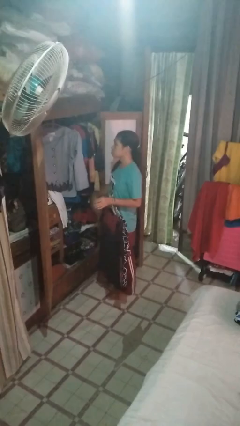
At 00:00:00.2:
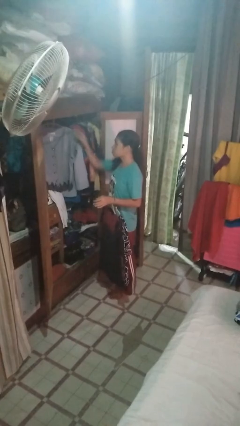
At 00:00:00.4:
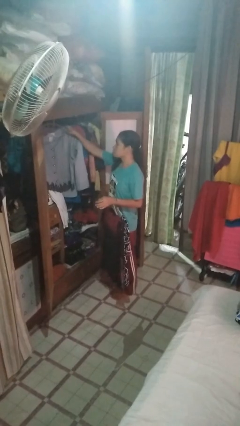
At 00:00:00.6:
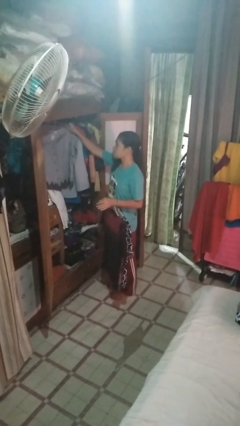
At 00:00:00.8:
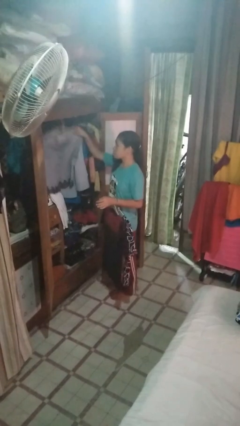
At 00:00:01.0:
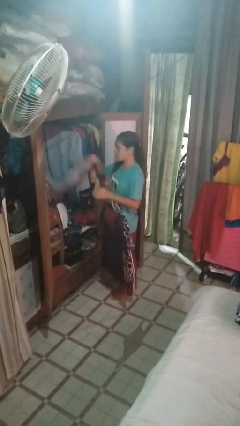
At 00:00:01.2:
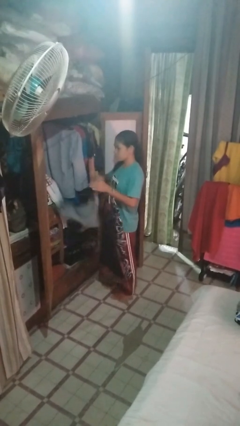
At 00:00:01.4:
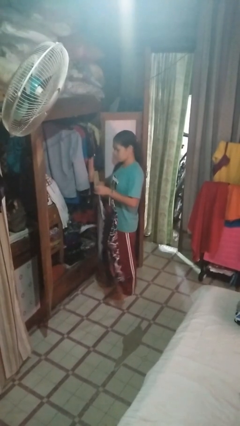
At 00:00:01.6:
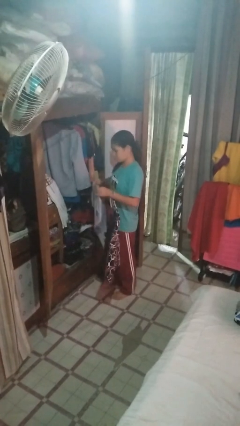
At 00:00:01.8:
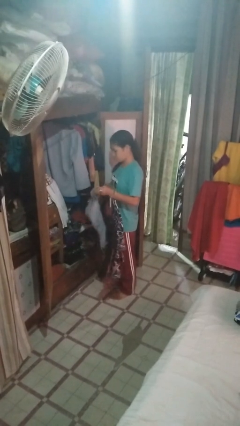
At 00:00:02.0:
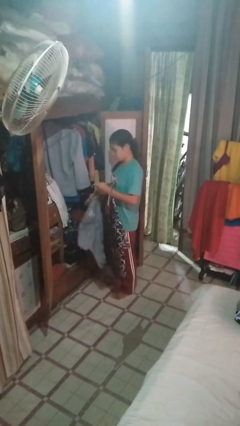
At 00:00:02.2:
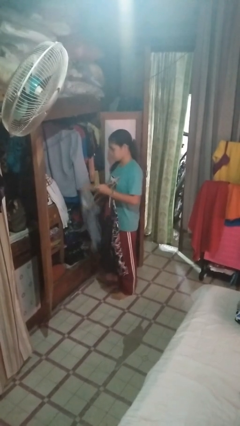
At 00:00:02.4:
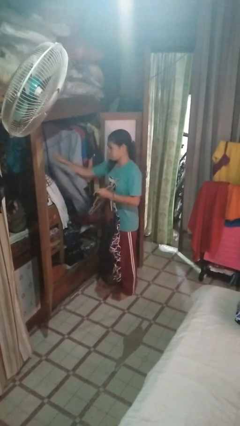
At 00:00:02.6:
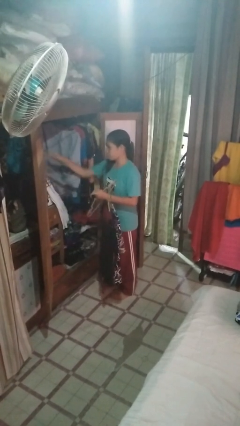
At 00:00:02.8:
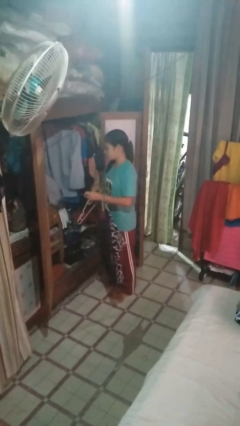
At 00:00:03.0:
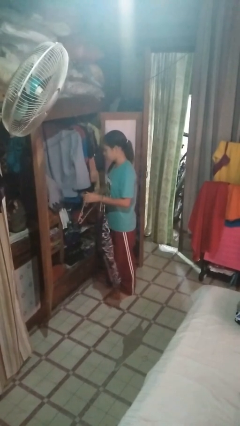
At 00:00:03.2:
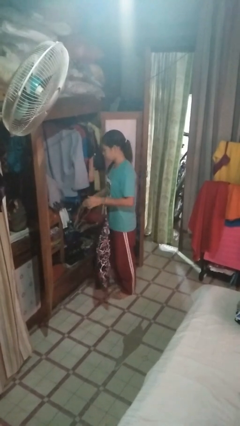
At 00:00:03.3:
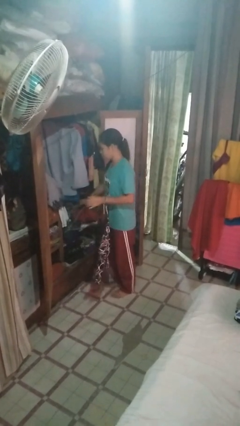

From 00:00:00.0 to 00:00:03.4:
person takes clothes from closet

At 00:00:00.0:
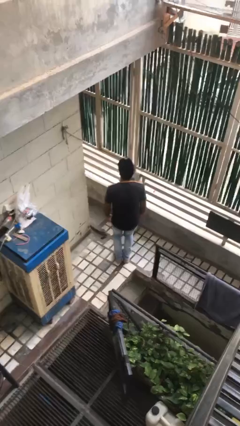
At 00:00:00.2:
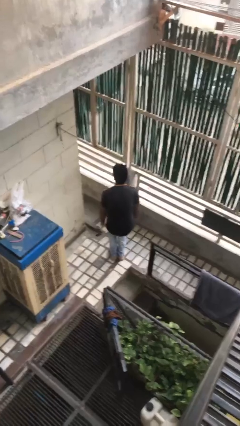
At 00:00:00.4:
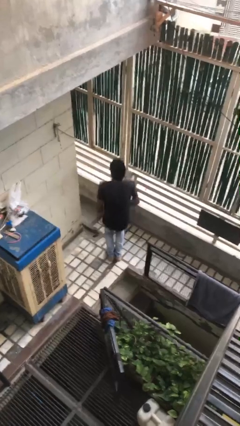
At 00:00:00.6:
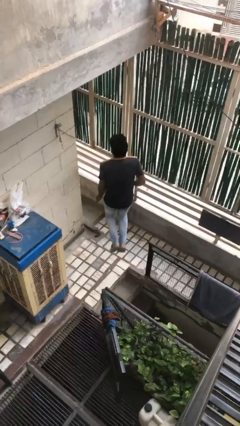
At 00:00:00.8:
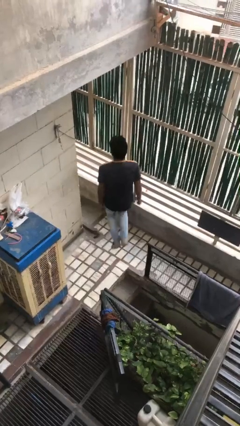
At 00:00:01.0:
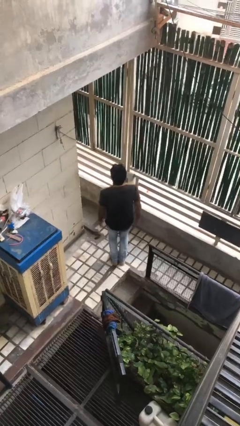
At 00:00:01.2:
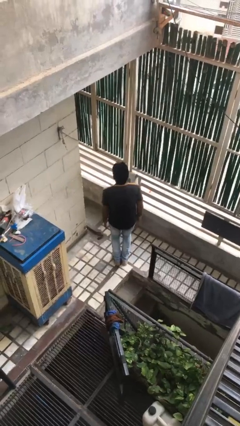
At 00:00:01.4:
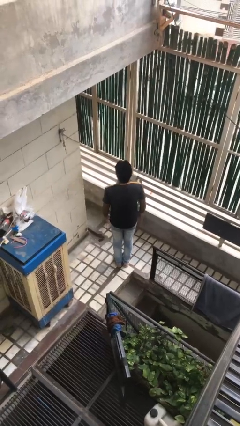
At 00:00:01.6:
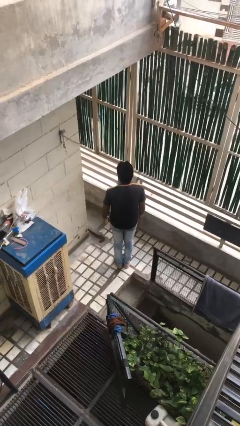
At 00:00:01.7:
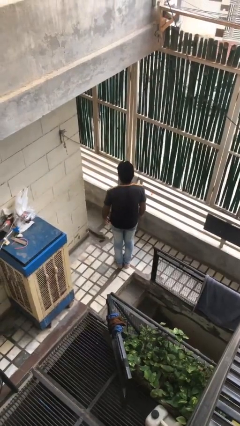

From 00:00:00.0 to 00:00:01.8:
person jumps

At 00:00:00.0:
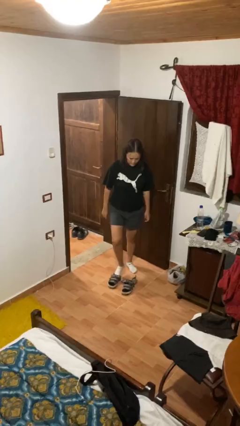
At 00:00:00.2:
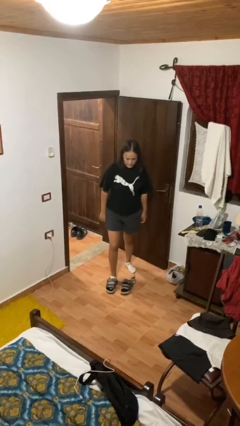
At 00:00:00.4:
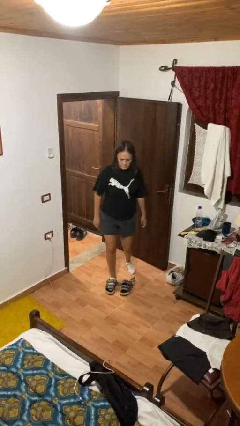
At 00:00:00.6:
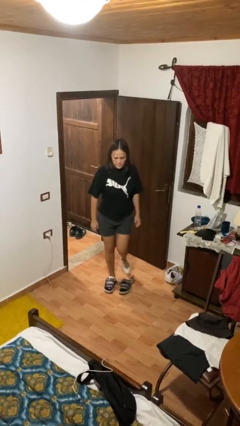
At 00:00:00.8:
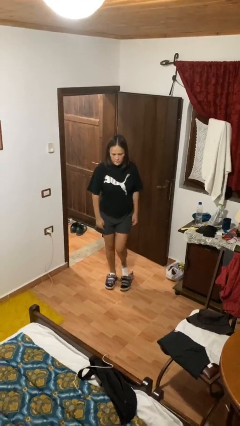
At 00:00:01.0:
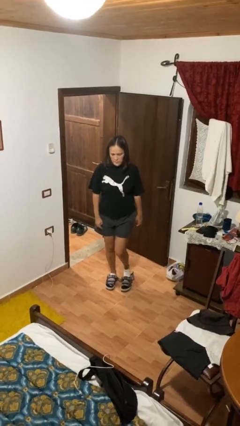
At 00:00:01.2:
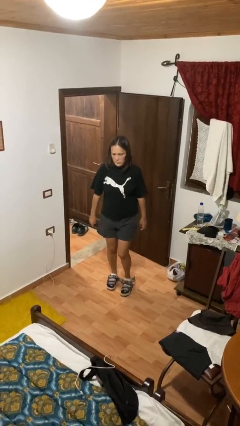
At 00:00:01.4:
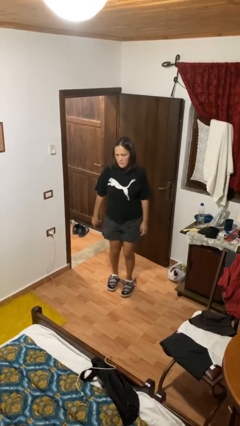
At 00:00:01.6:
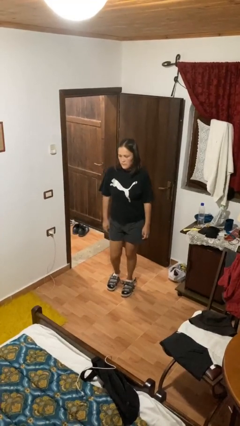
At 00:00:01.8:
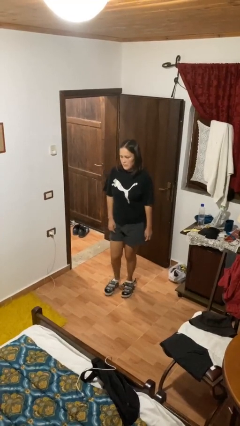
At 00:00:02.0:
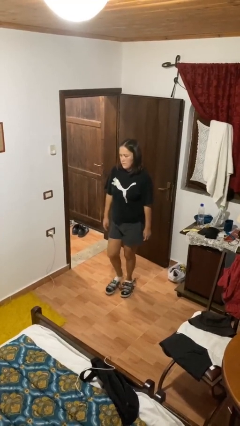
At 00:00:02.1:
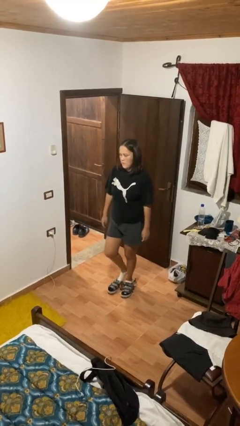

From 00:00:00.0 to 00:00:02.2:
person puts on shoes

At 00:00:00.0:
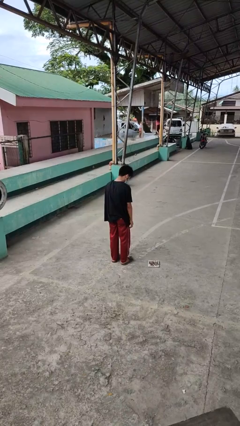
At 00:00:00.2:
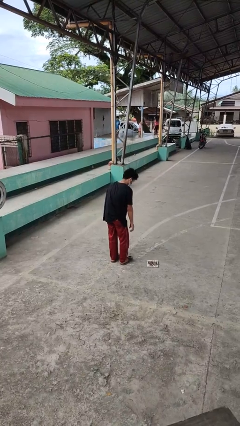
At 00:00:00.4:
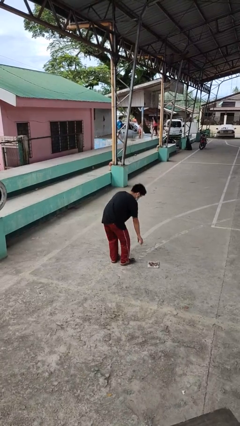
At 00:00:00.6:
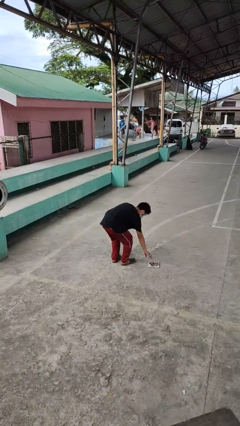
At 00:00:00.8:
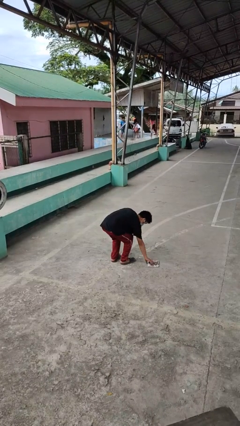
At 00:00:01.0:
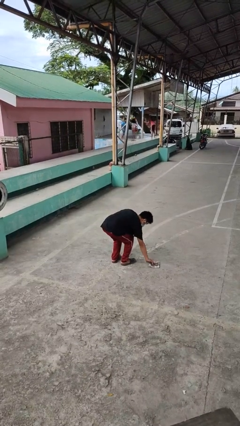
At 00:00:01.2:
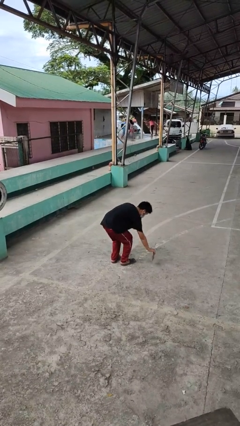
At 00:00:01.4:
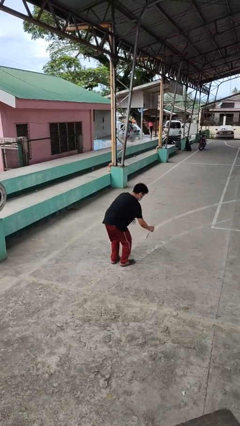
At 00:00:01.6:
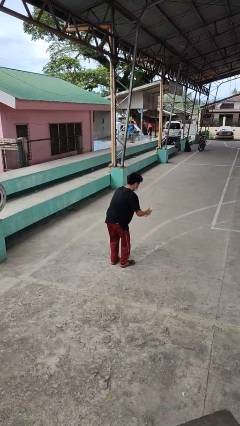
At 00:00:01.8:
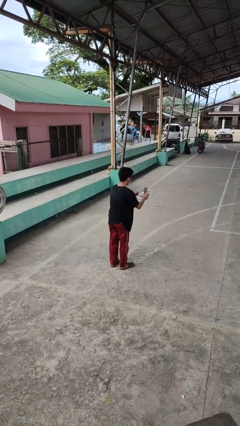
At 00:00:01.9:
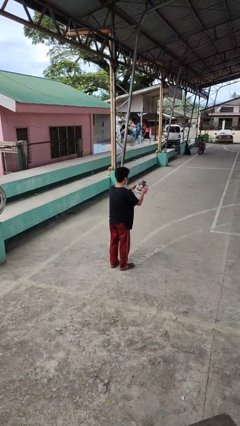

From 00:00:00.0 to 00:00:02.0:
person picks up object from floor

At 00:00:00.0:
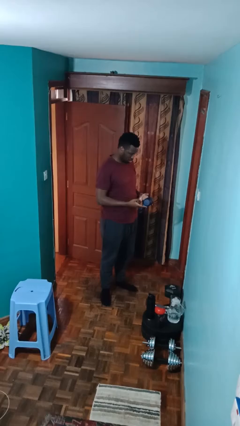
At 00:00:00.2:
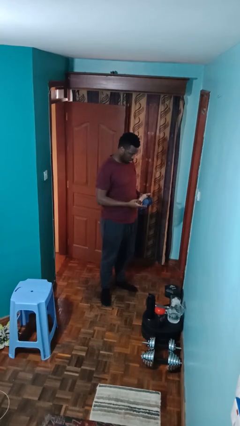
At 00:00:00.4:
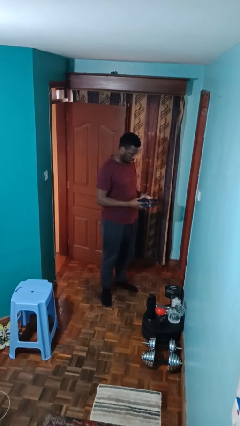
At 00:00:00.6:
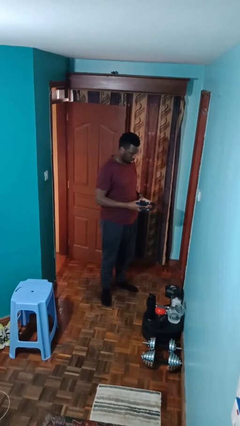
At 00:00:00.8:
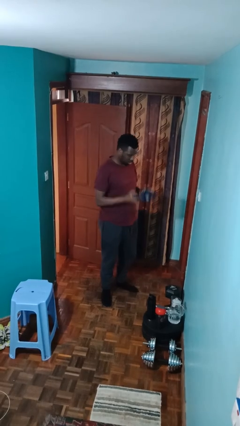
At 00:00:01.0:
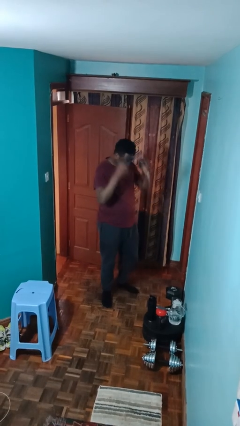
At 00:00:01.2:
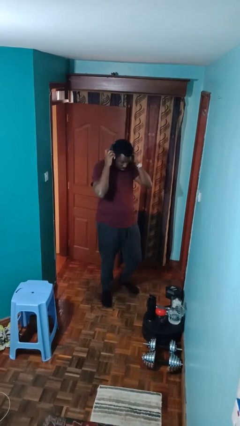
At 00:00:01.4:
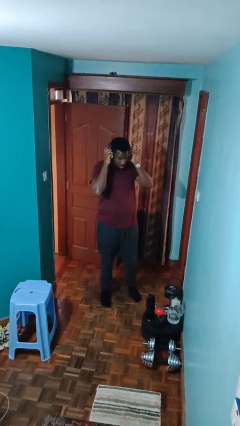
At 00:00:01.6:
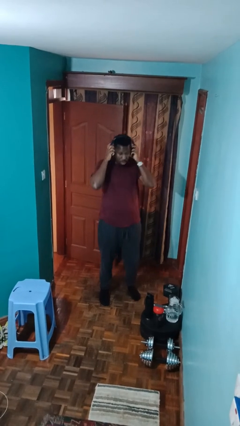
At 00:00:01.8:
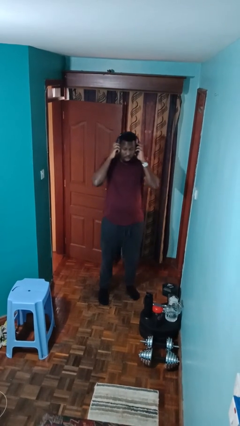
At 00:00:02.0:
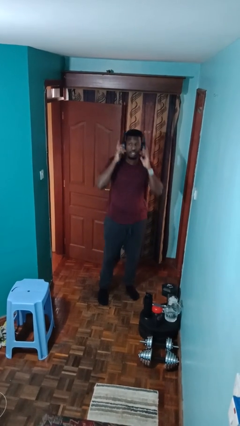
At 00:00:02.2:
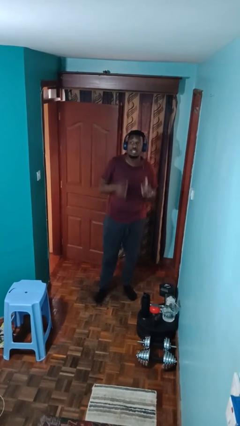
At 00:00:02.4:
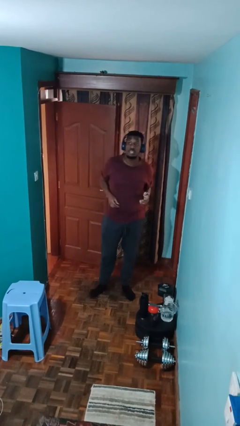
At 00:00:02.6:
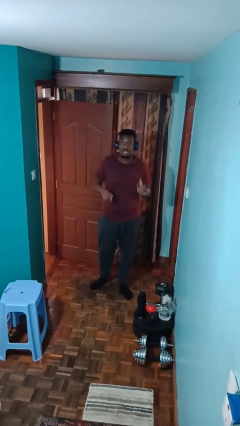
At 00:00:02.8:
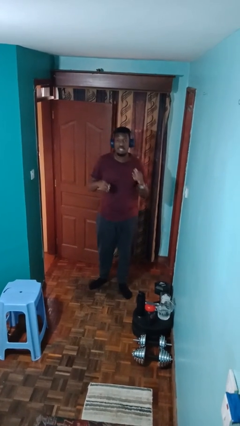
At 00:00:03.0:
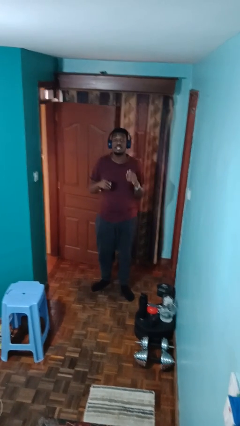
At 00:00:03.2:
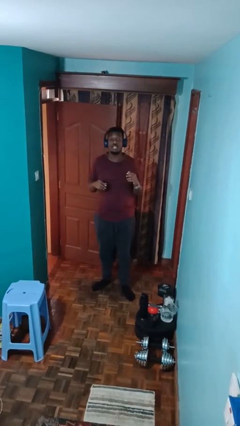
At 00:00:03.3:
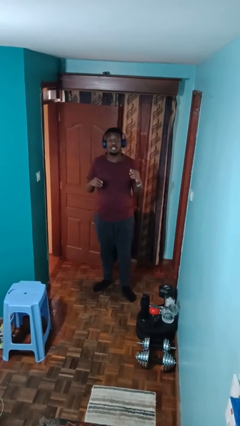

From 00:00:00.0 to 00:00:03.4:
person puts on headphones

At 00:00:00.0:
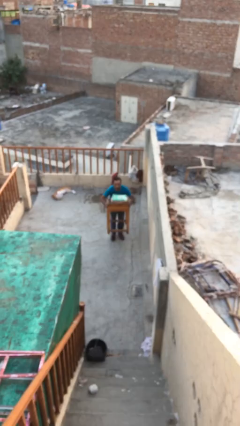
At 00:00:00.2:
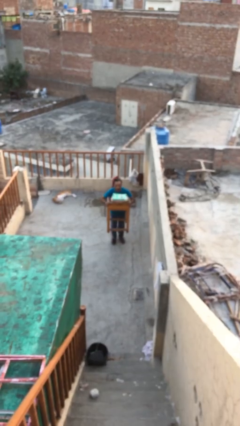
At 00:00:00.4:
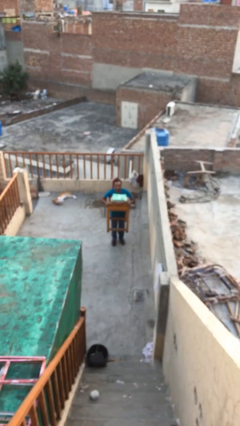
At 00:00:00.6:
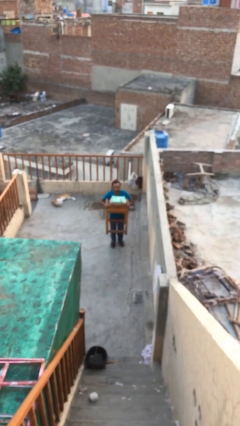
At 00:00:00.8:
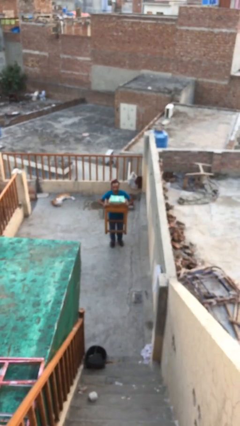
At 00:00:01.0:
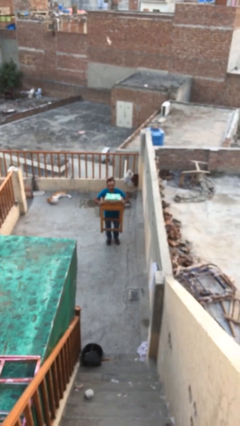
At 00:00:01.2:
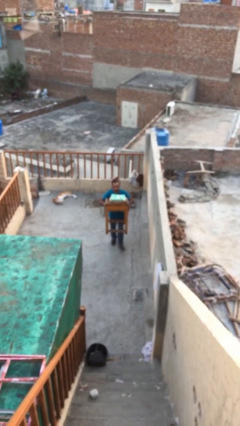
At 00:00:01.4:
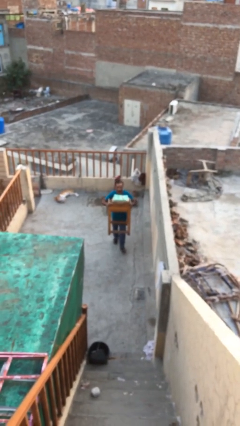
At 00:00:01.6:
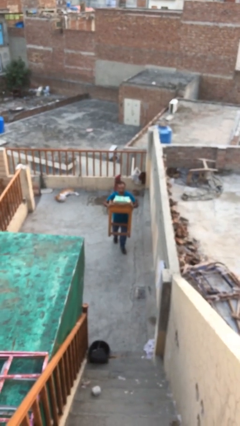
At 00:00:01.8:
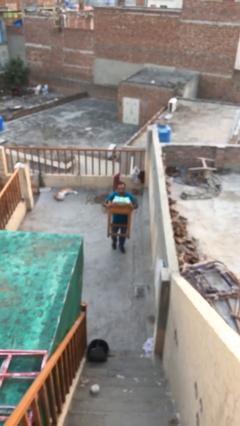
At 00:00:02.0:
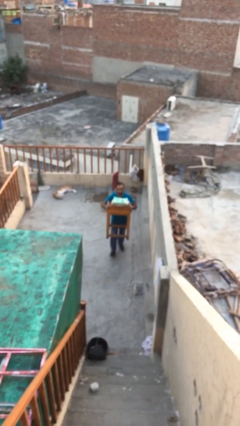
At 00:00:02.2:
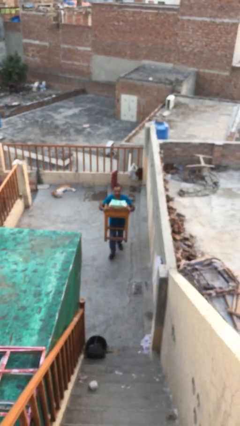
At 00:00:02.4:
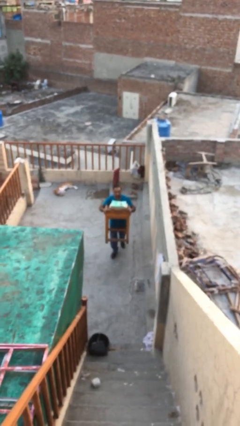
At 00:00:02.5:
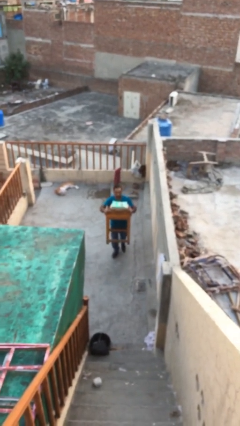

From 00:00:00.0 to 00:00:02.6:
person carries heavy object

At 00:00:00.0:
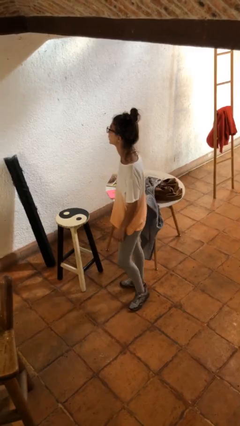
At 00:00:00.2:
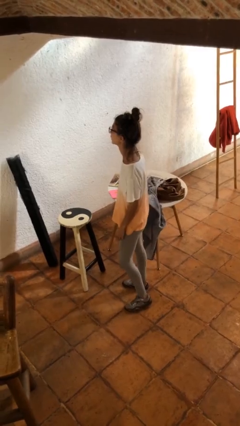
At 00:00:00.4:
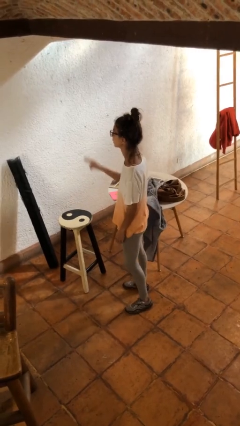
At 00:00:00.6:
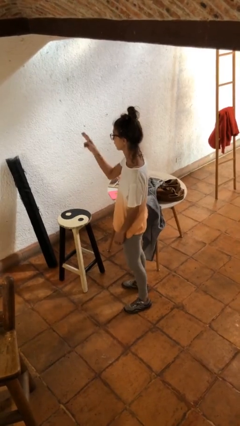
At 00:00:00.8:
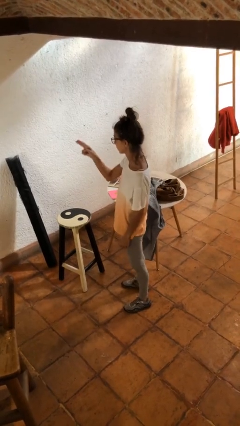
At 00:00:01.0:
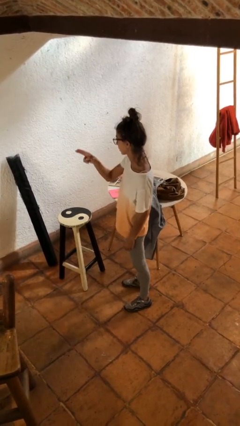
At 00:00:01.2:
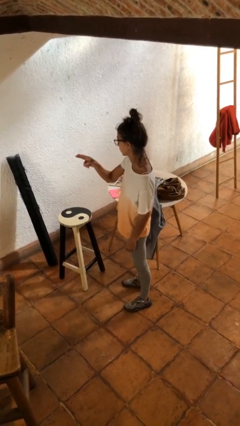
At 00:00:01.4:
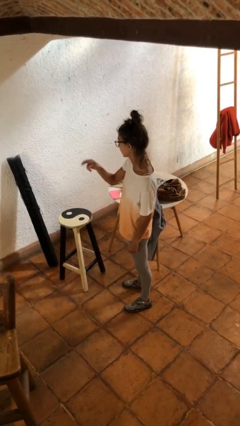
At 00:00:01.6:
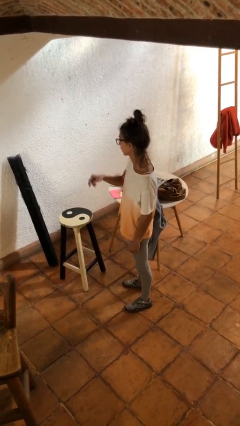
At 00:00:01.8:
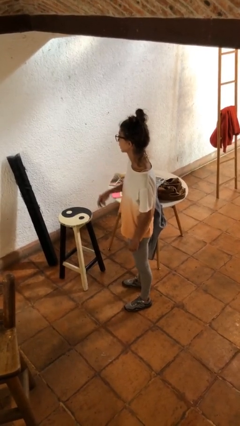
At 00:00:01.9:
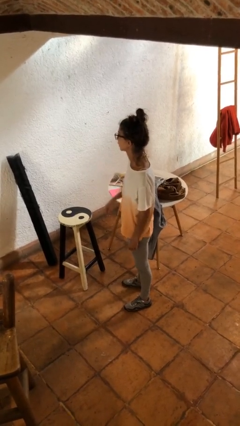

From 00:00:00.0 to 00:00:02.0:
person gestures swipe left
